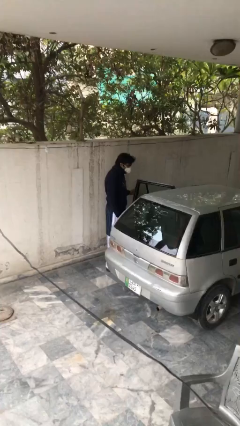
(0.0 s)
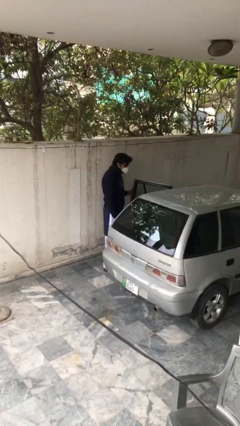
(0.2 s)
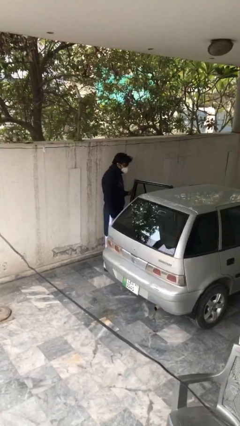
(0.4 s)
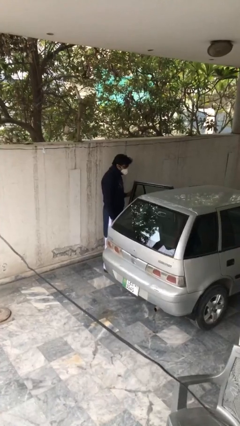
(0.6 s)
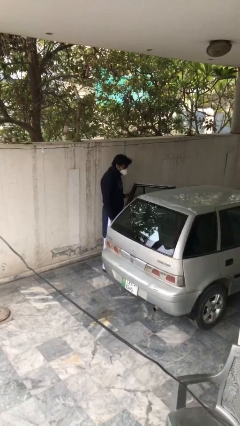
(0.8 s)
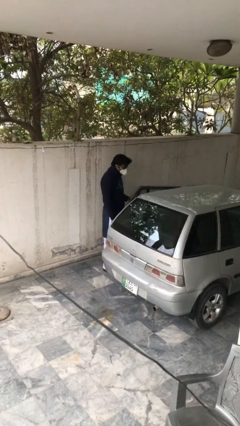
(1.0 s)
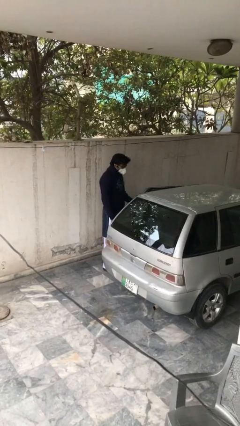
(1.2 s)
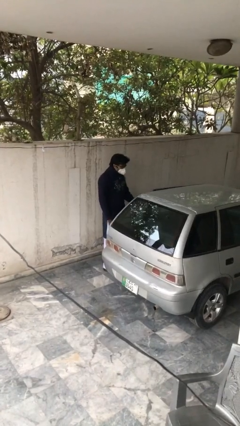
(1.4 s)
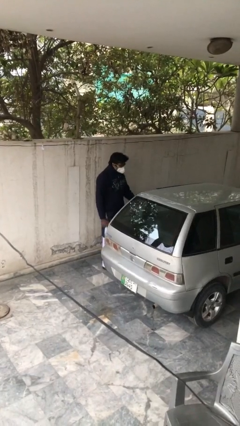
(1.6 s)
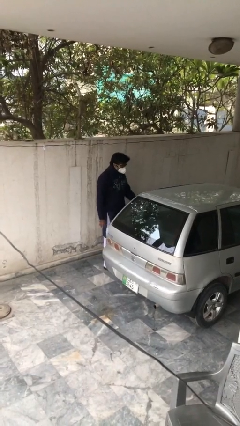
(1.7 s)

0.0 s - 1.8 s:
person closes car door

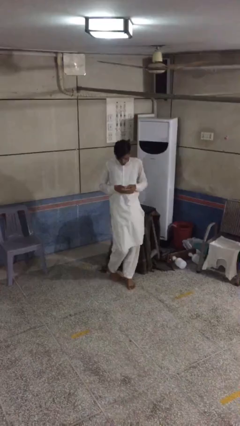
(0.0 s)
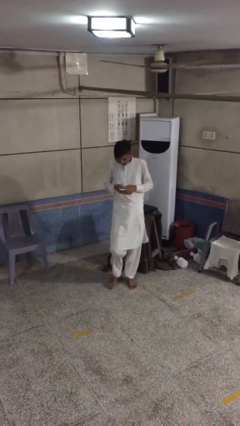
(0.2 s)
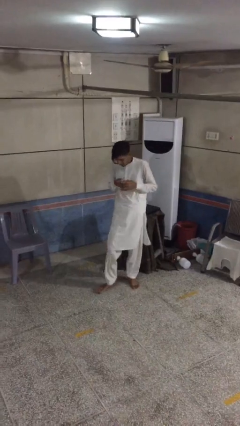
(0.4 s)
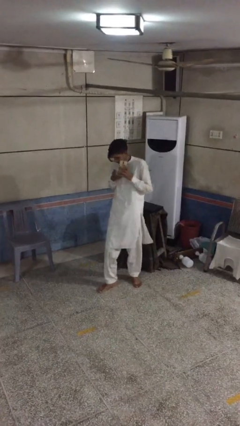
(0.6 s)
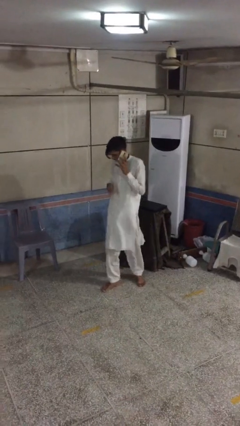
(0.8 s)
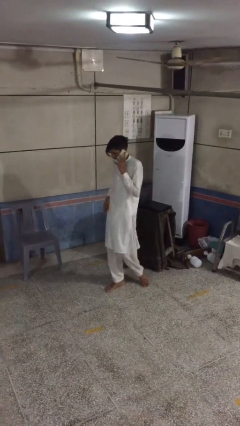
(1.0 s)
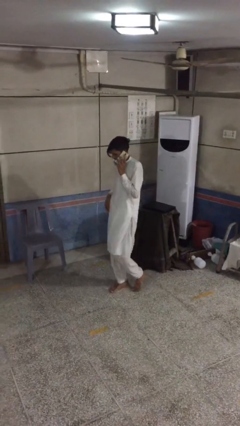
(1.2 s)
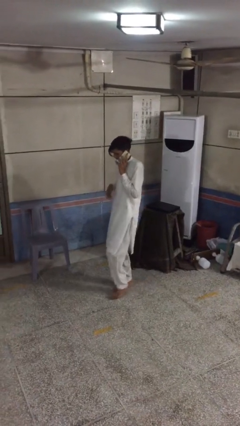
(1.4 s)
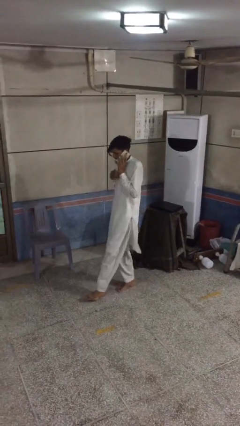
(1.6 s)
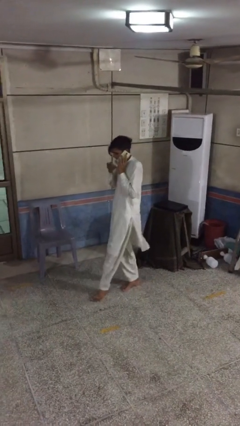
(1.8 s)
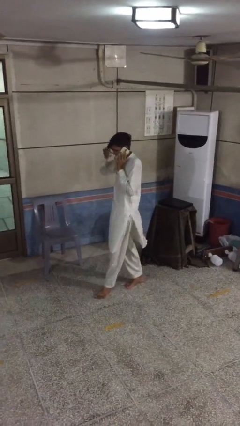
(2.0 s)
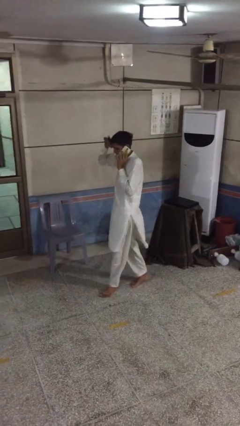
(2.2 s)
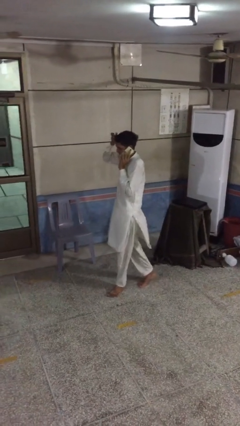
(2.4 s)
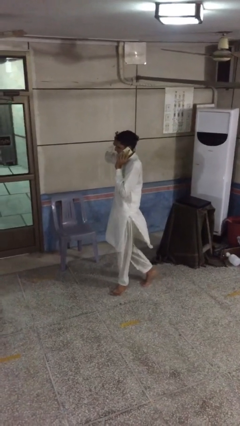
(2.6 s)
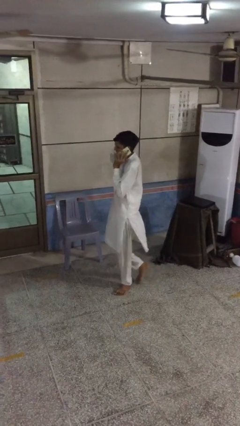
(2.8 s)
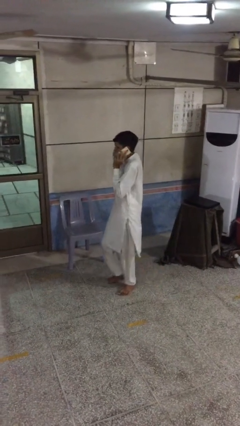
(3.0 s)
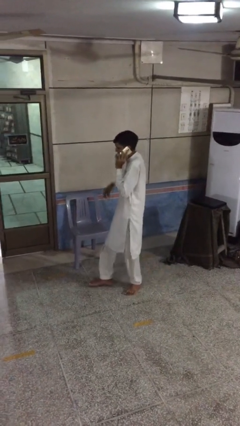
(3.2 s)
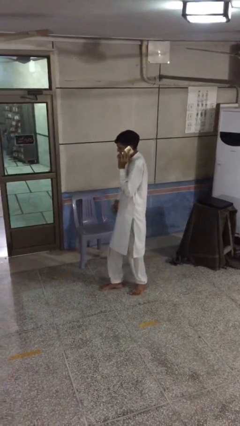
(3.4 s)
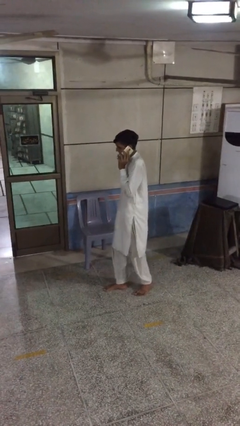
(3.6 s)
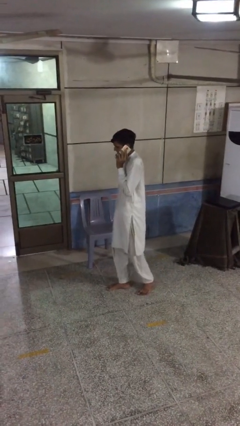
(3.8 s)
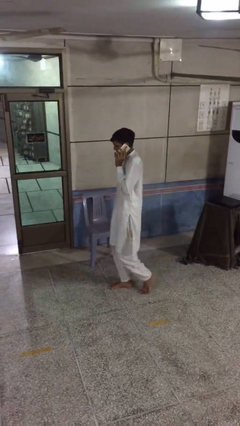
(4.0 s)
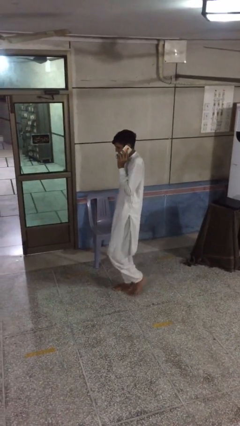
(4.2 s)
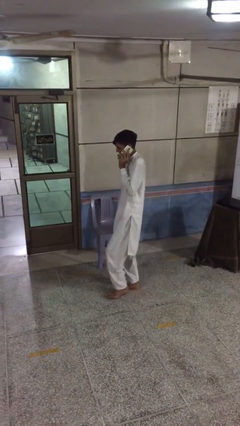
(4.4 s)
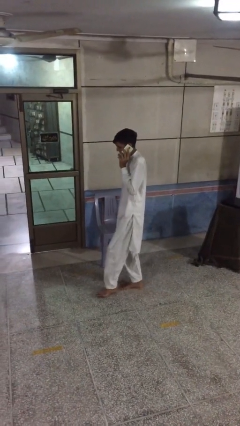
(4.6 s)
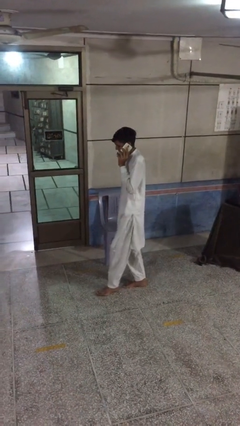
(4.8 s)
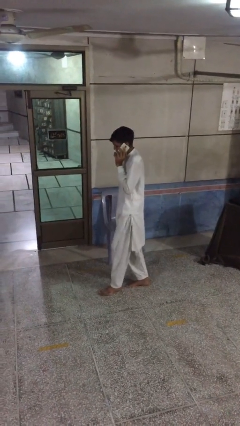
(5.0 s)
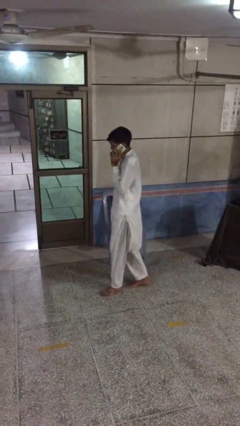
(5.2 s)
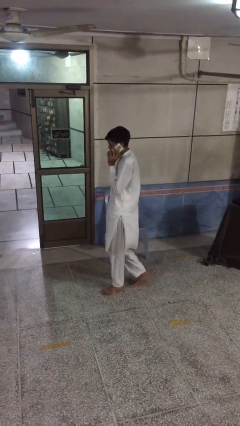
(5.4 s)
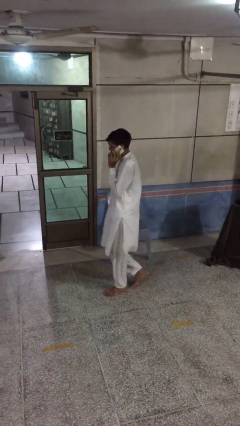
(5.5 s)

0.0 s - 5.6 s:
person talks on phone

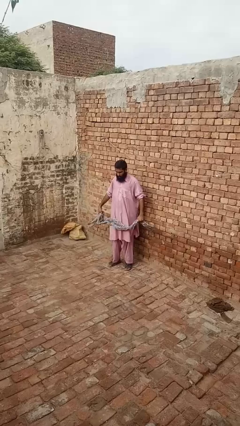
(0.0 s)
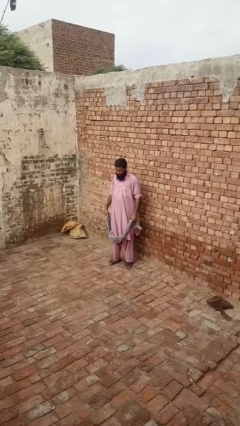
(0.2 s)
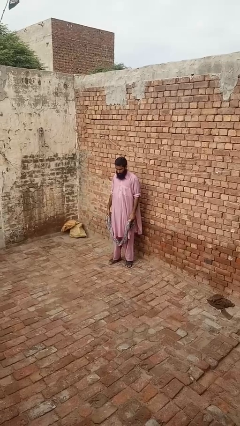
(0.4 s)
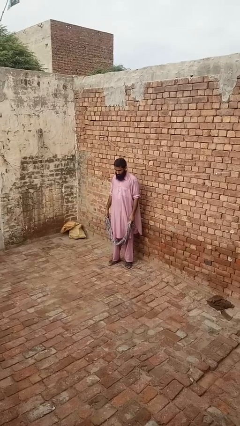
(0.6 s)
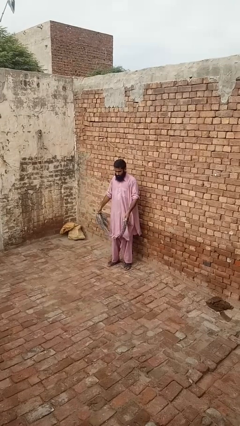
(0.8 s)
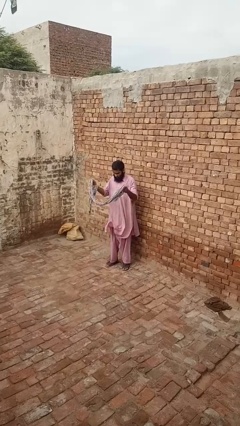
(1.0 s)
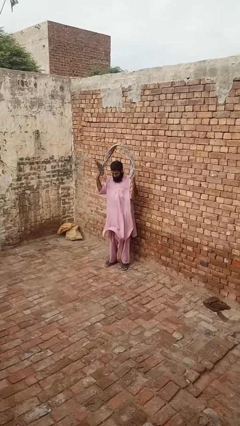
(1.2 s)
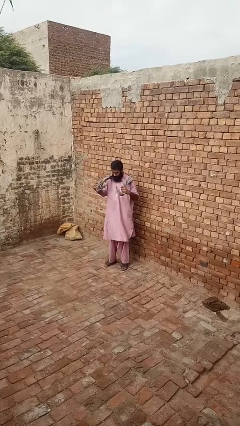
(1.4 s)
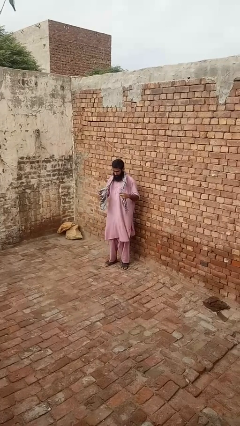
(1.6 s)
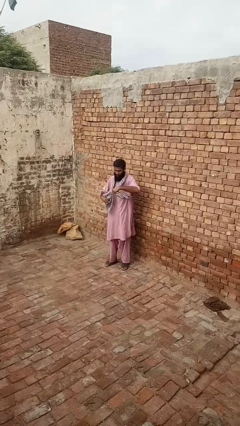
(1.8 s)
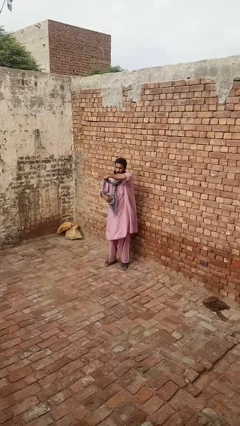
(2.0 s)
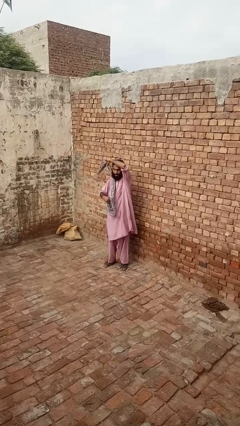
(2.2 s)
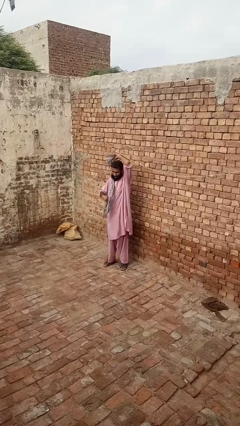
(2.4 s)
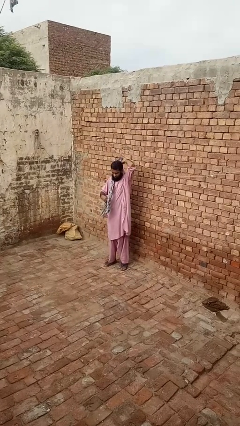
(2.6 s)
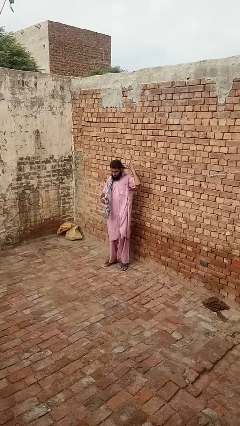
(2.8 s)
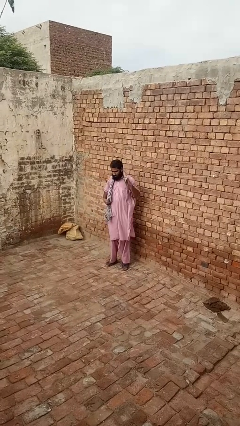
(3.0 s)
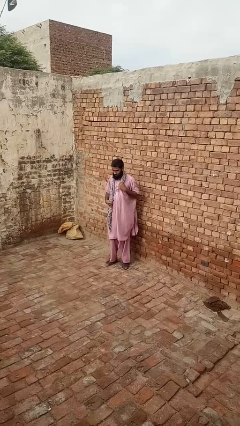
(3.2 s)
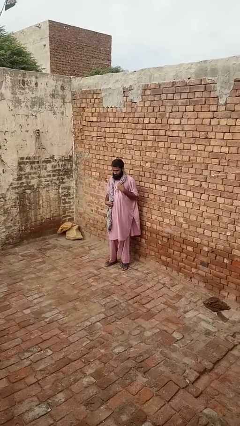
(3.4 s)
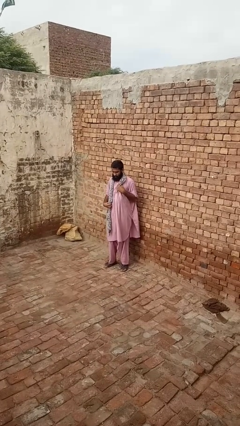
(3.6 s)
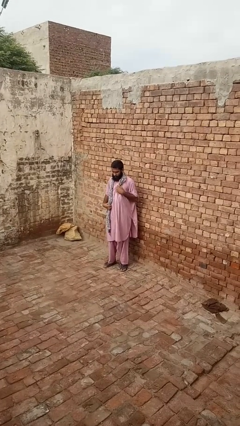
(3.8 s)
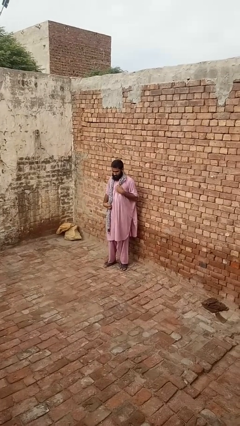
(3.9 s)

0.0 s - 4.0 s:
person puts on scarf

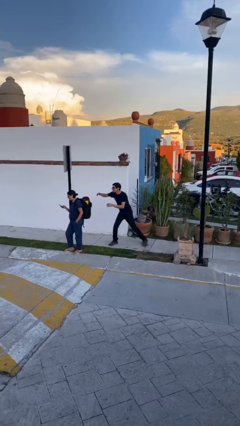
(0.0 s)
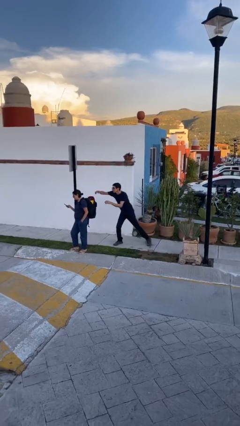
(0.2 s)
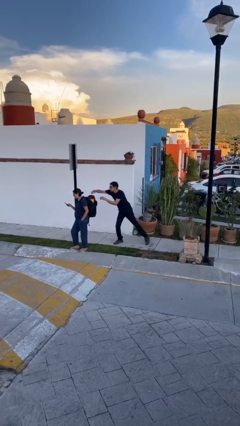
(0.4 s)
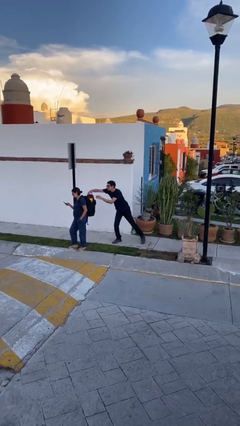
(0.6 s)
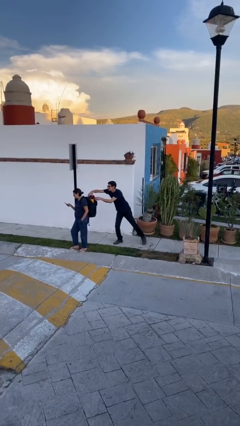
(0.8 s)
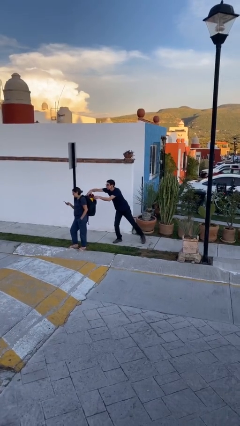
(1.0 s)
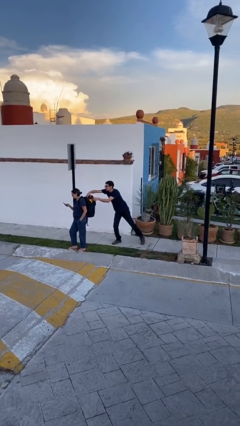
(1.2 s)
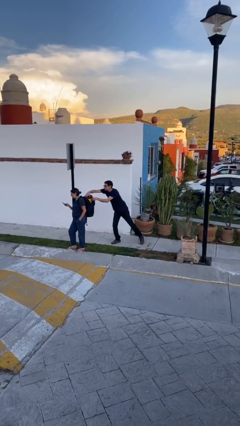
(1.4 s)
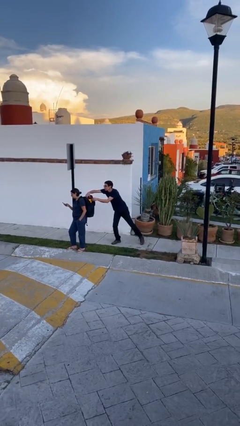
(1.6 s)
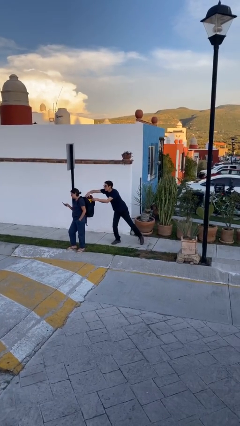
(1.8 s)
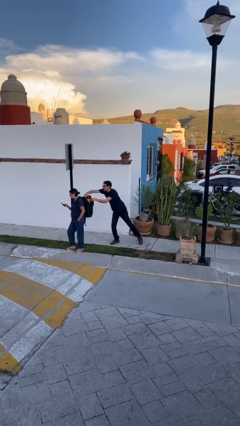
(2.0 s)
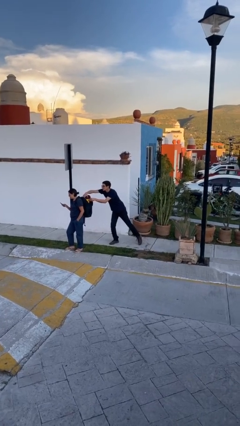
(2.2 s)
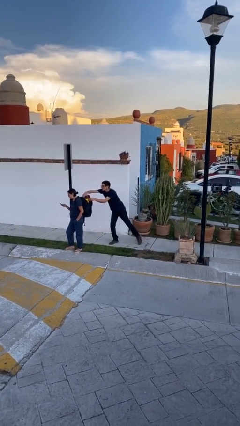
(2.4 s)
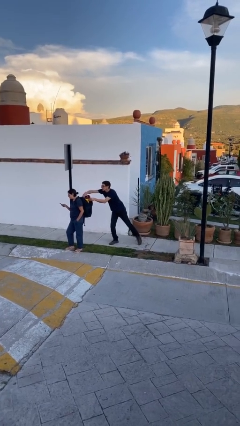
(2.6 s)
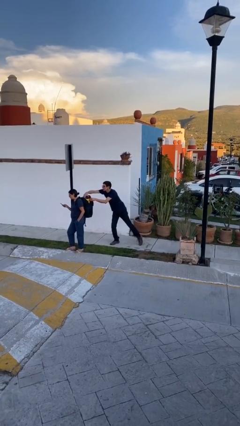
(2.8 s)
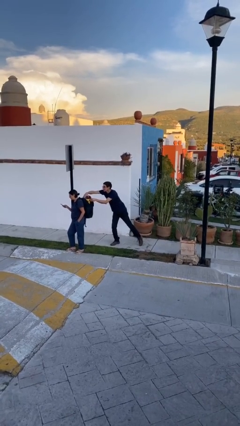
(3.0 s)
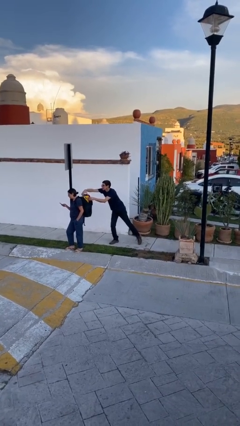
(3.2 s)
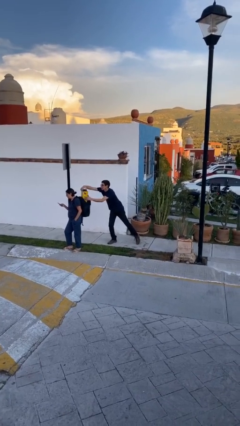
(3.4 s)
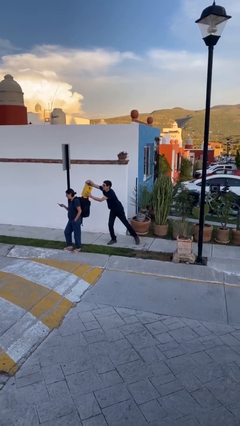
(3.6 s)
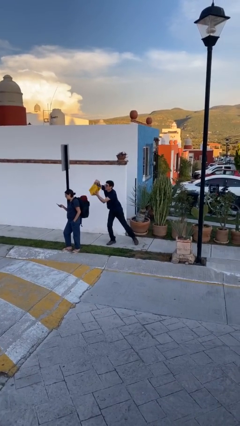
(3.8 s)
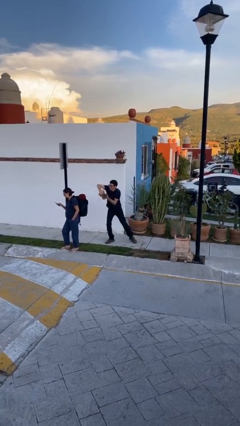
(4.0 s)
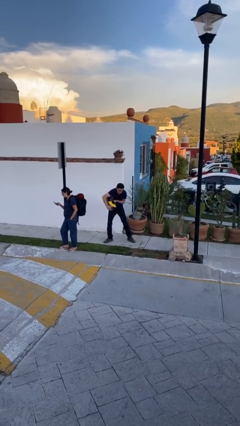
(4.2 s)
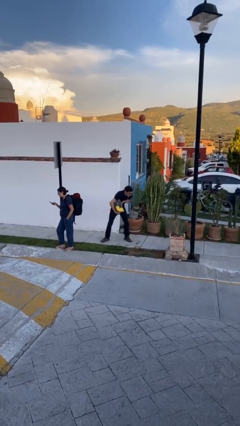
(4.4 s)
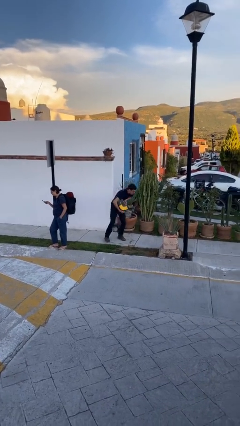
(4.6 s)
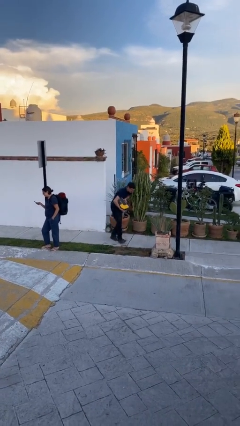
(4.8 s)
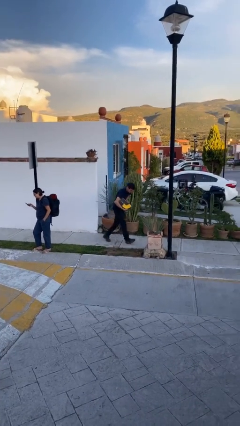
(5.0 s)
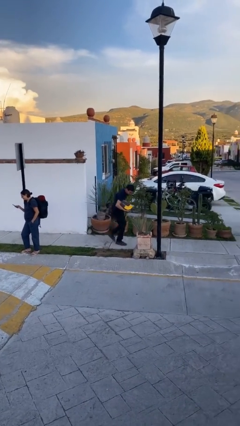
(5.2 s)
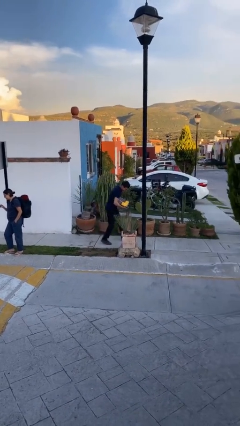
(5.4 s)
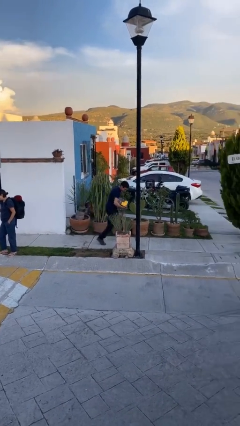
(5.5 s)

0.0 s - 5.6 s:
person steals object from person

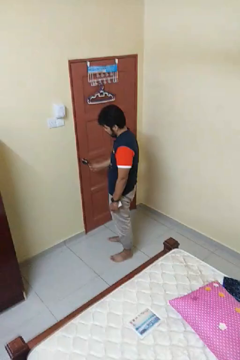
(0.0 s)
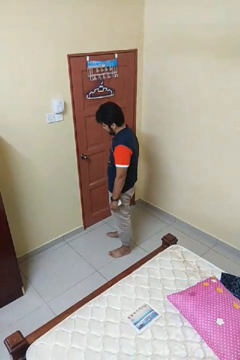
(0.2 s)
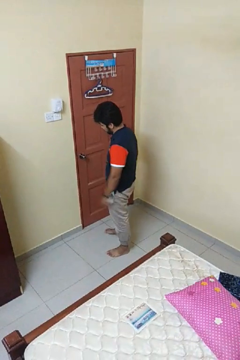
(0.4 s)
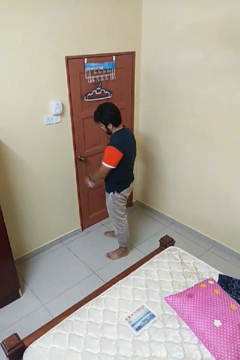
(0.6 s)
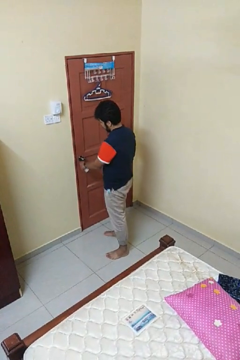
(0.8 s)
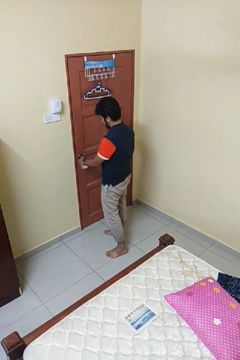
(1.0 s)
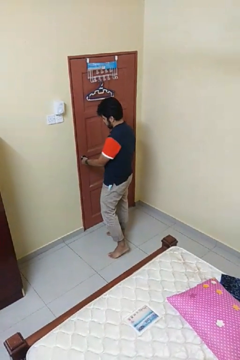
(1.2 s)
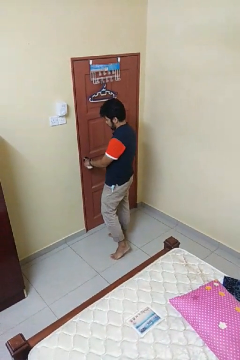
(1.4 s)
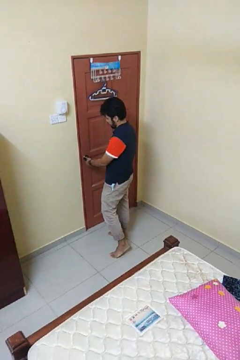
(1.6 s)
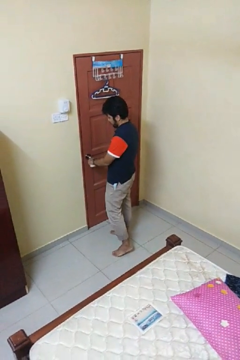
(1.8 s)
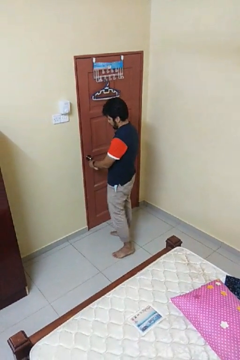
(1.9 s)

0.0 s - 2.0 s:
person locks door with keys
